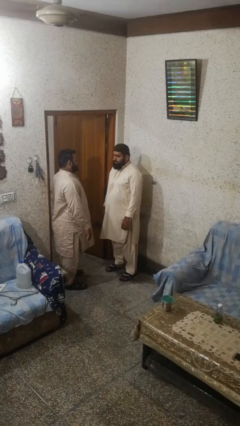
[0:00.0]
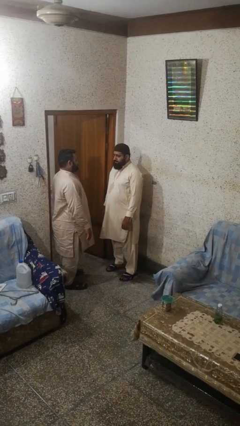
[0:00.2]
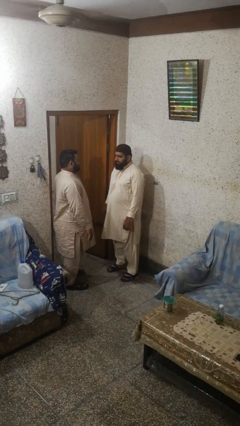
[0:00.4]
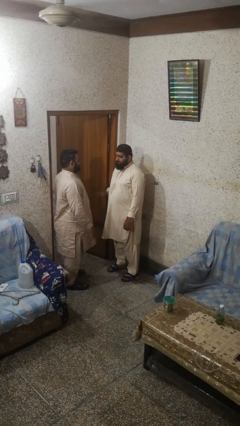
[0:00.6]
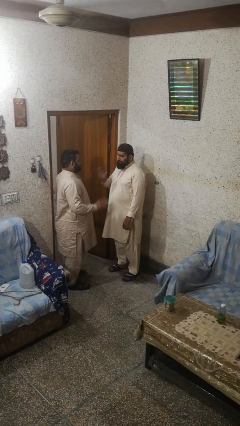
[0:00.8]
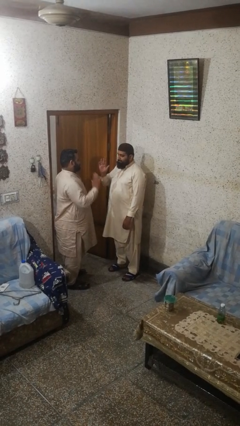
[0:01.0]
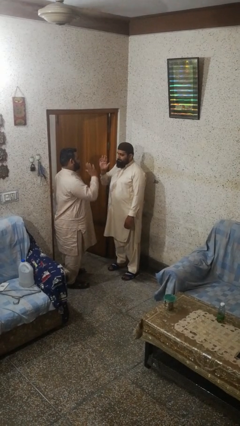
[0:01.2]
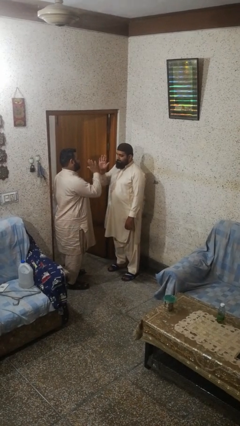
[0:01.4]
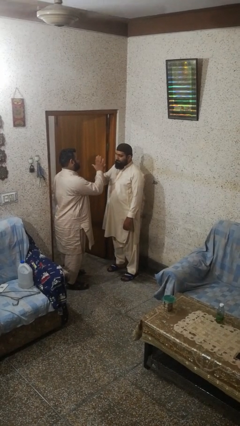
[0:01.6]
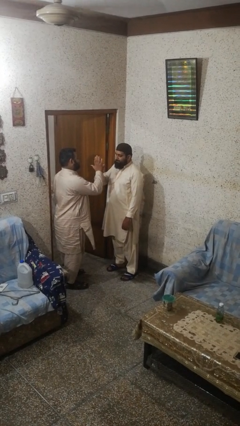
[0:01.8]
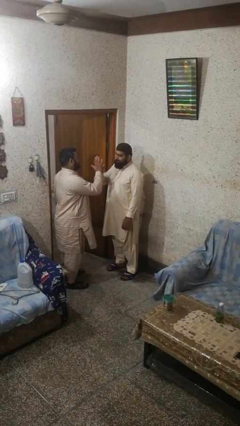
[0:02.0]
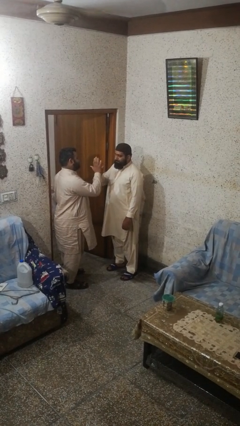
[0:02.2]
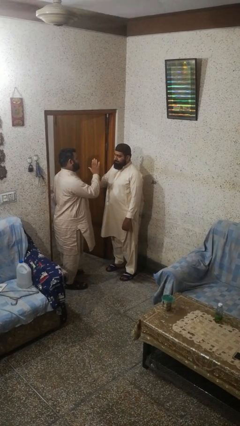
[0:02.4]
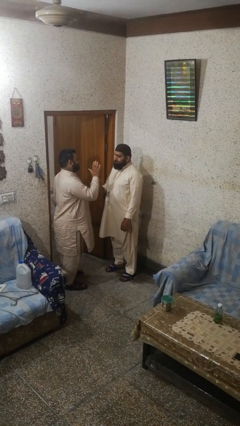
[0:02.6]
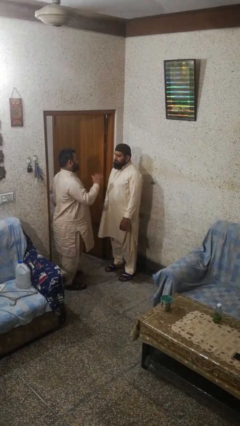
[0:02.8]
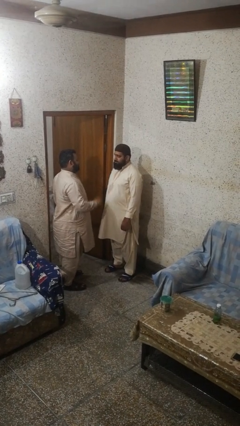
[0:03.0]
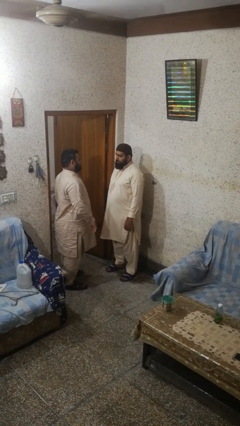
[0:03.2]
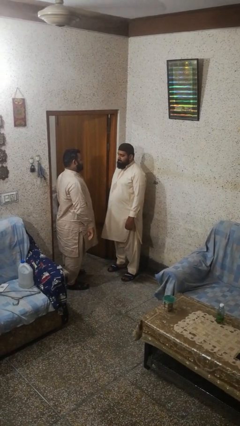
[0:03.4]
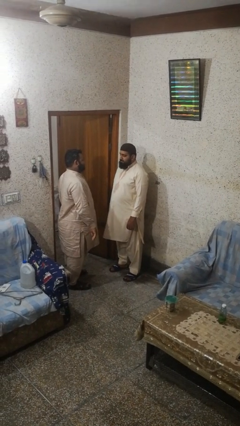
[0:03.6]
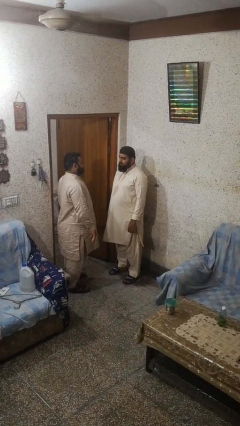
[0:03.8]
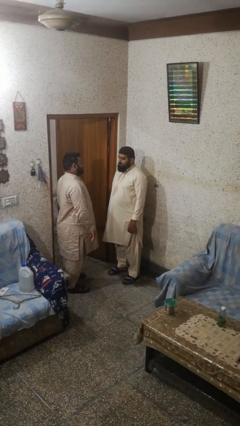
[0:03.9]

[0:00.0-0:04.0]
person highfives hand

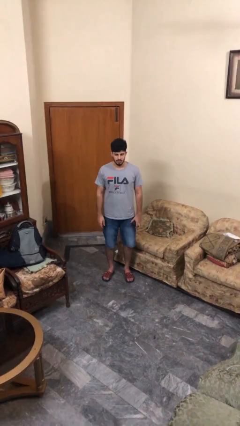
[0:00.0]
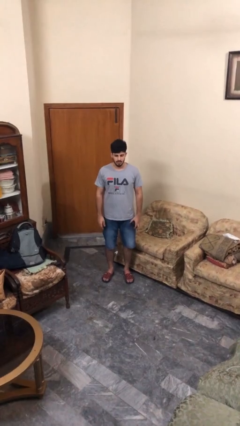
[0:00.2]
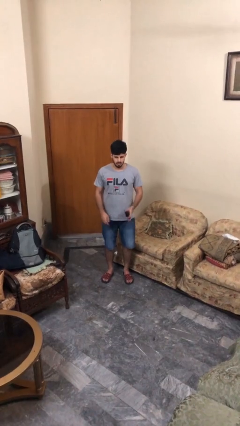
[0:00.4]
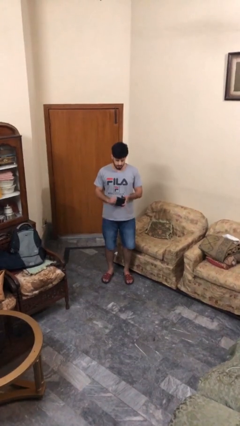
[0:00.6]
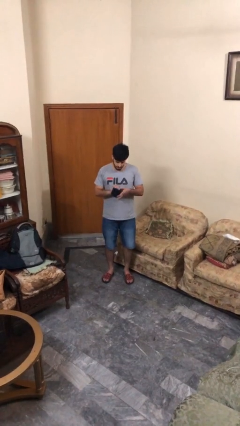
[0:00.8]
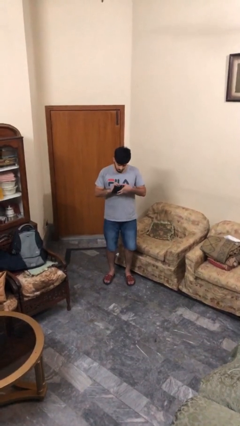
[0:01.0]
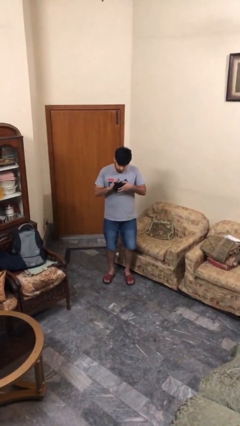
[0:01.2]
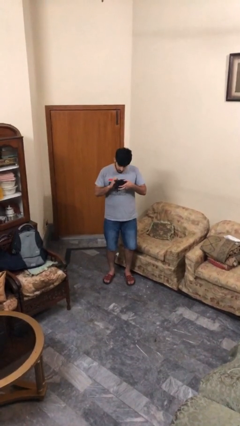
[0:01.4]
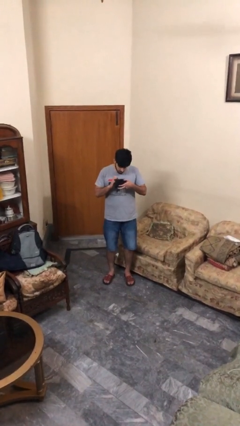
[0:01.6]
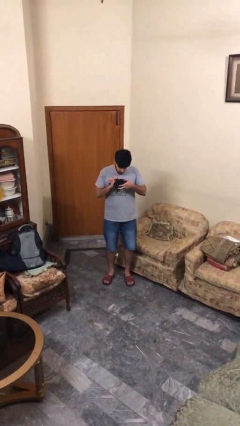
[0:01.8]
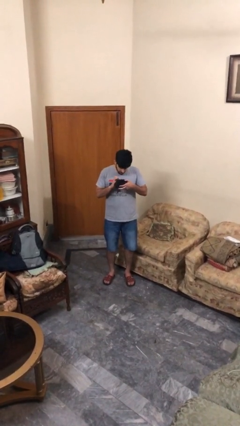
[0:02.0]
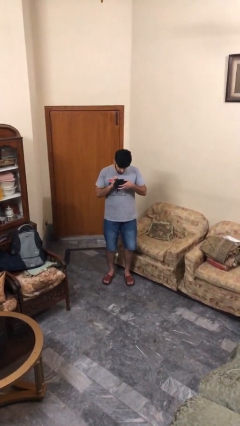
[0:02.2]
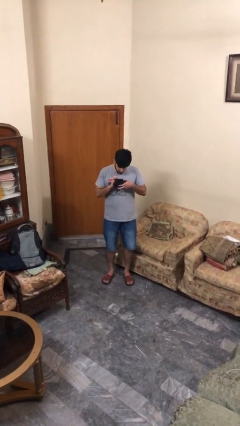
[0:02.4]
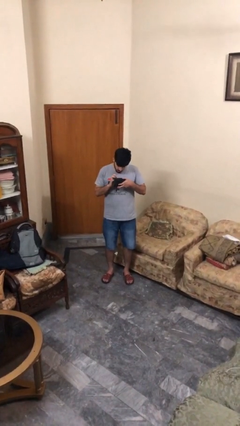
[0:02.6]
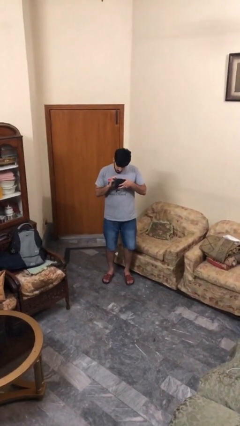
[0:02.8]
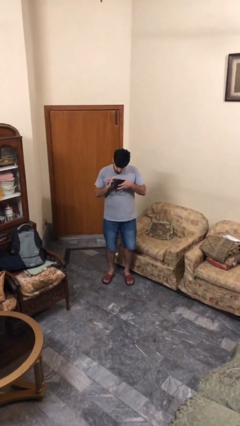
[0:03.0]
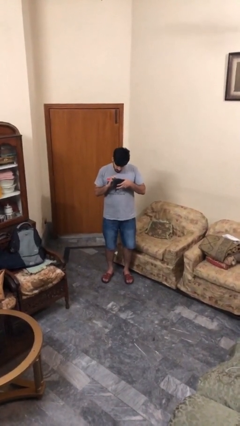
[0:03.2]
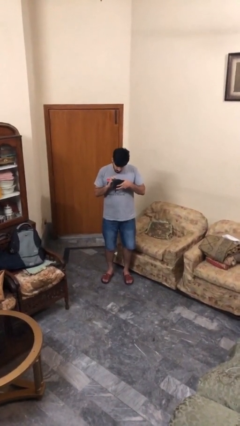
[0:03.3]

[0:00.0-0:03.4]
person searches in purse

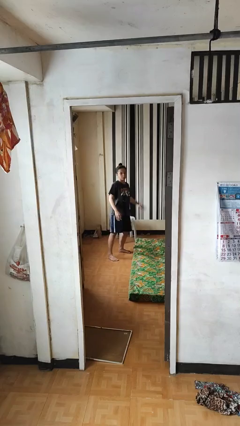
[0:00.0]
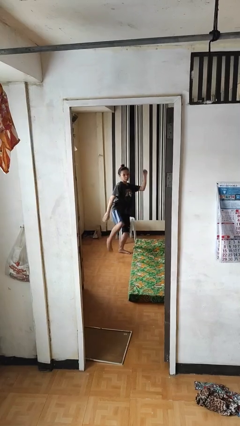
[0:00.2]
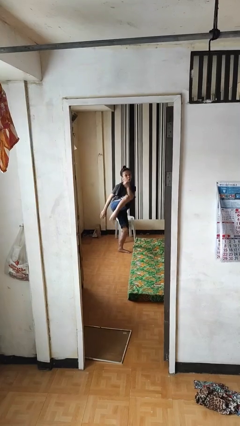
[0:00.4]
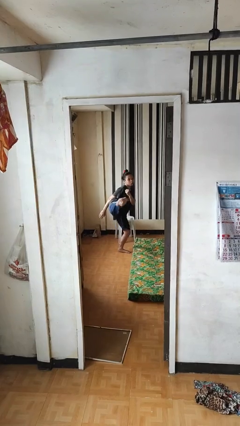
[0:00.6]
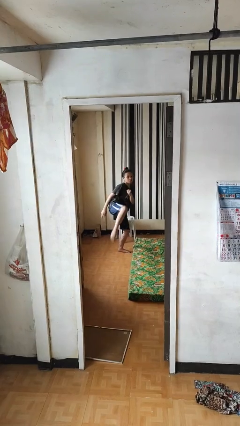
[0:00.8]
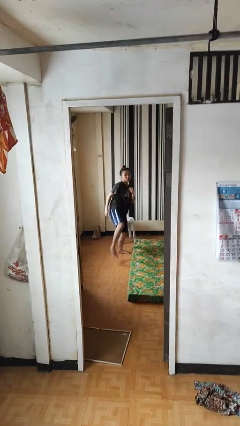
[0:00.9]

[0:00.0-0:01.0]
person karate kicks

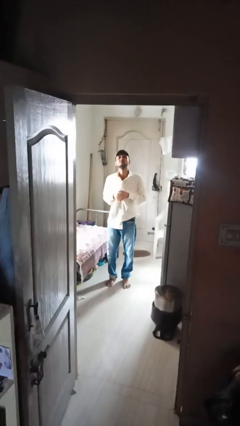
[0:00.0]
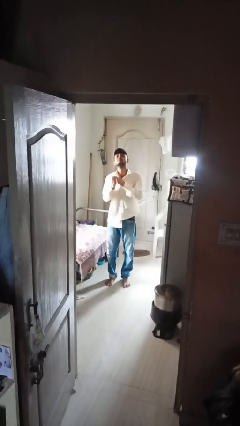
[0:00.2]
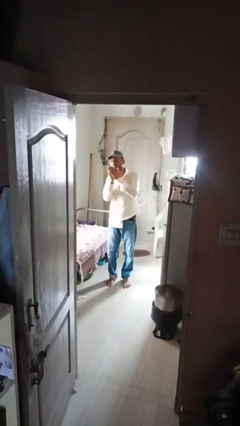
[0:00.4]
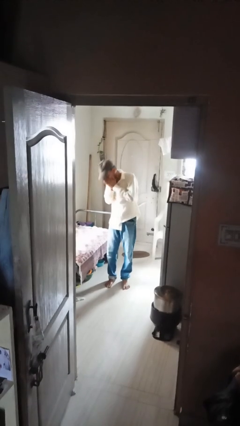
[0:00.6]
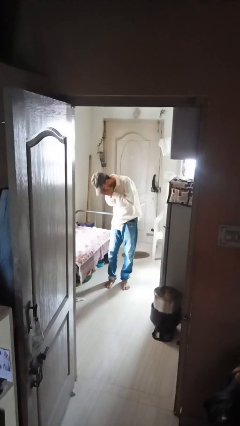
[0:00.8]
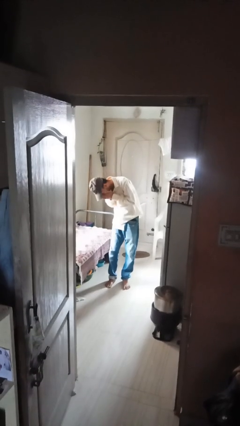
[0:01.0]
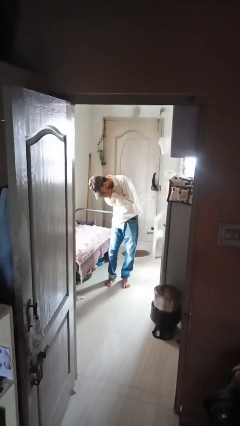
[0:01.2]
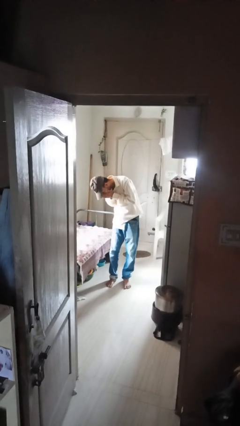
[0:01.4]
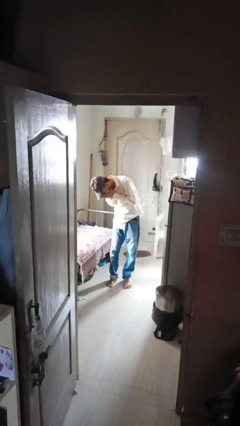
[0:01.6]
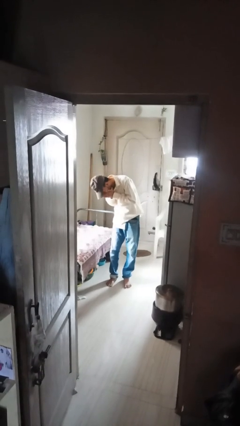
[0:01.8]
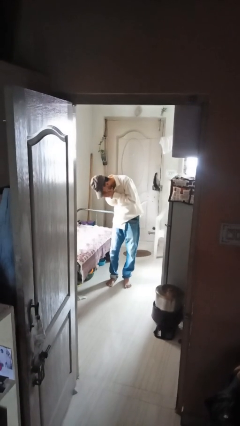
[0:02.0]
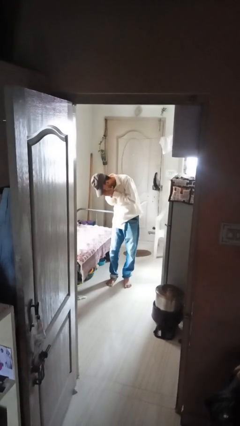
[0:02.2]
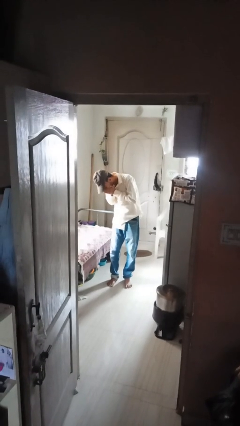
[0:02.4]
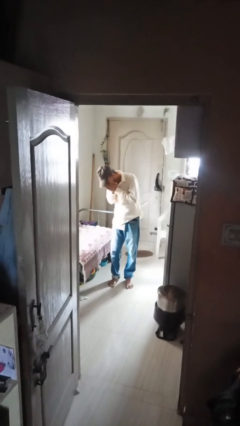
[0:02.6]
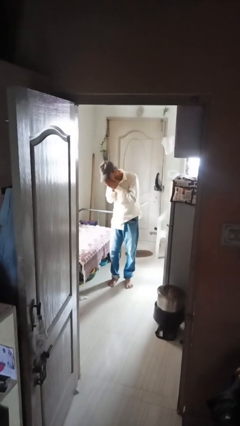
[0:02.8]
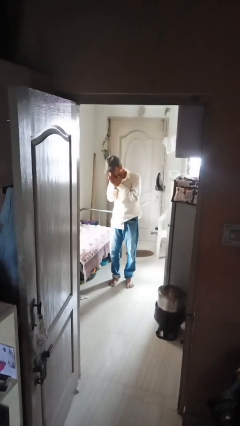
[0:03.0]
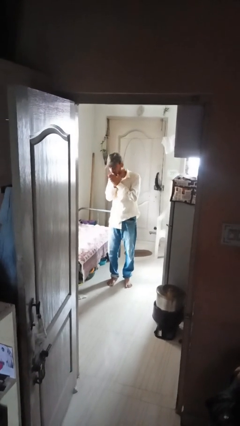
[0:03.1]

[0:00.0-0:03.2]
person sneezes into hand

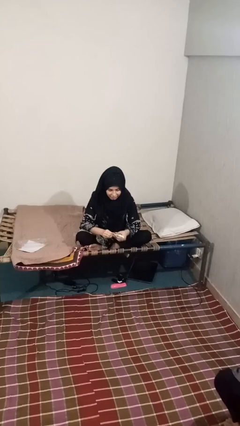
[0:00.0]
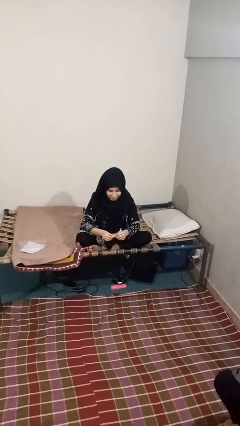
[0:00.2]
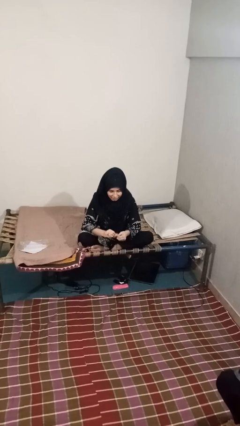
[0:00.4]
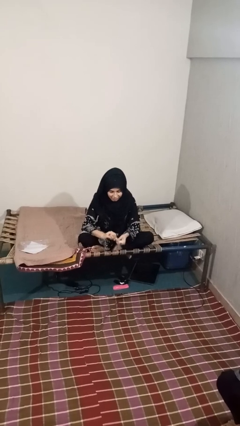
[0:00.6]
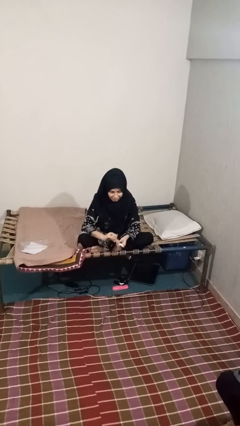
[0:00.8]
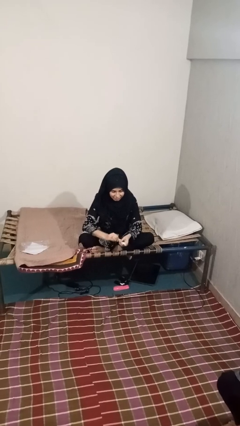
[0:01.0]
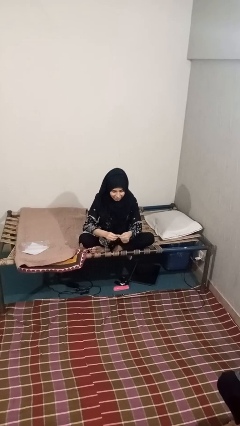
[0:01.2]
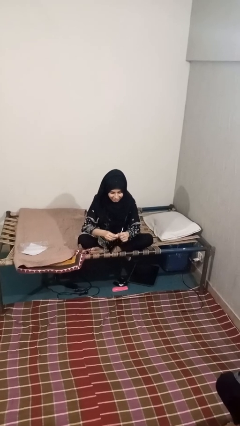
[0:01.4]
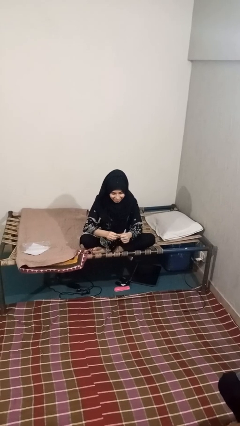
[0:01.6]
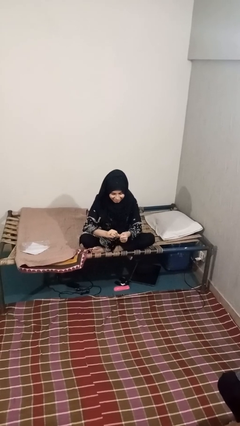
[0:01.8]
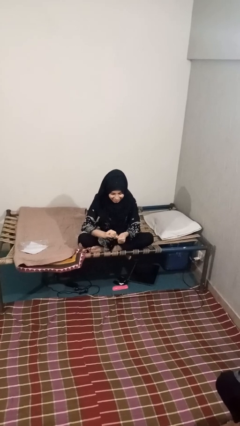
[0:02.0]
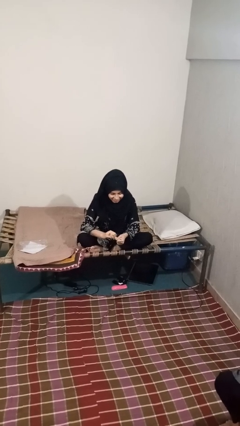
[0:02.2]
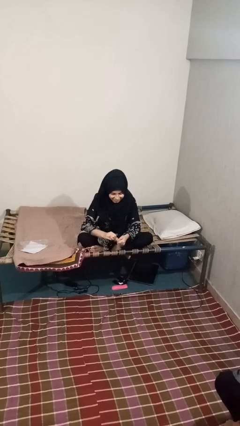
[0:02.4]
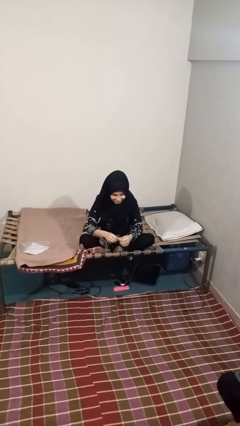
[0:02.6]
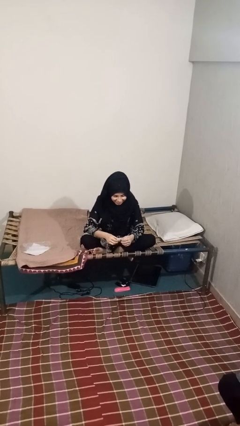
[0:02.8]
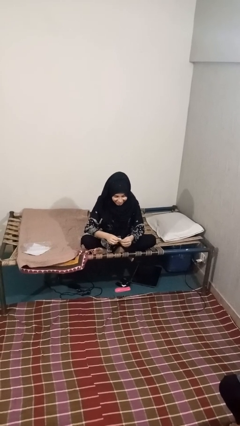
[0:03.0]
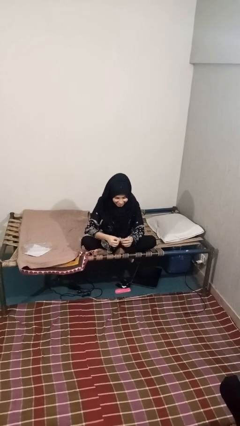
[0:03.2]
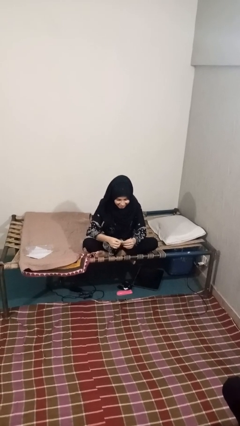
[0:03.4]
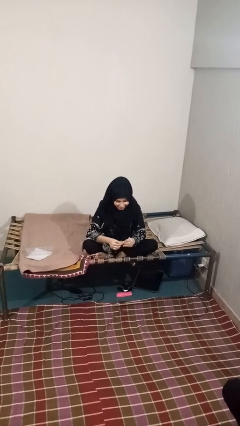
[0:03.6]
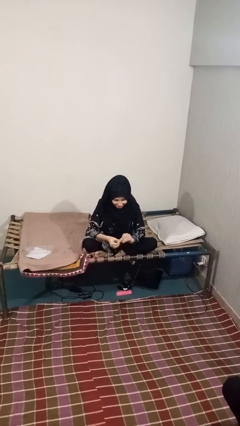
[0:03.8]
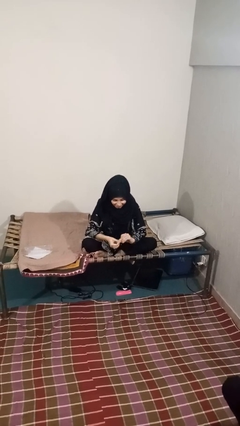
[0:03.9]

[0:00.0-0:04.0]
person tears paper

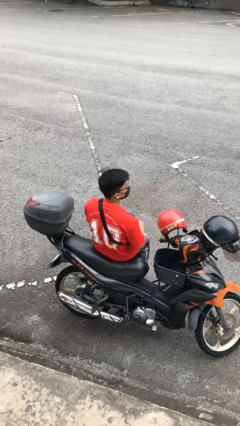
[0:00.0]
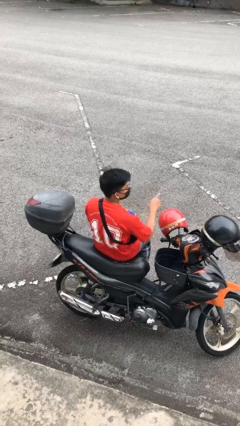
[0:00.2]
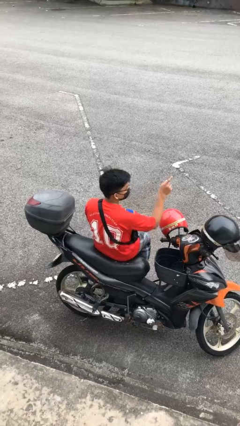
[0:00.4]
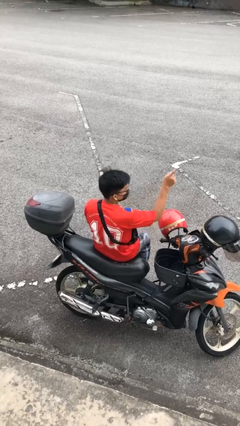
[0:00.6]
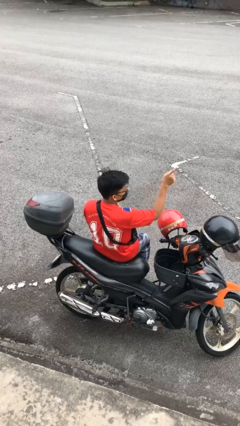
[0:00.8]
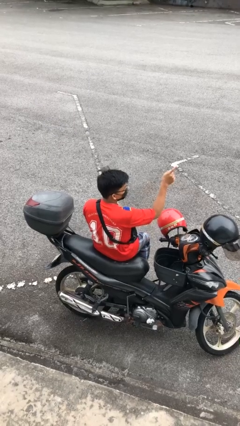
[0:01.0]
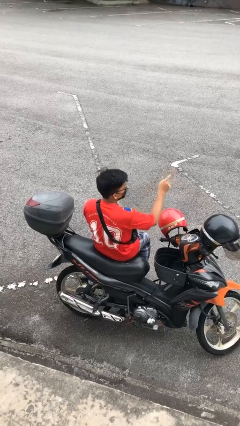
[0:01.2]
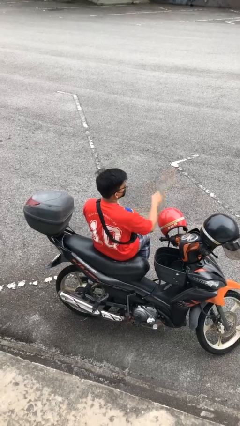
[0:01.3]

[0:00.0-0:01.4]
person points at person

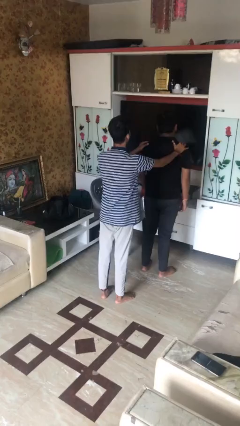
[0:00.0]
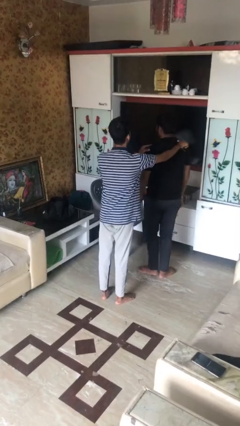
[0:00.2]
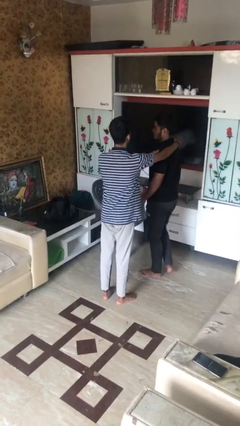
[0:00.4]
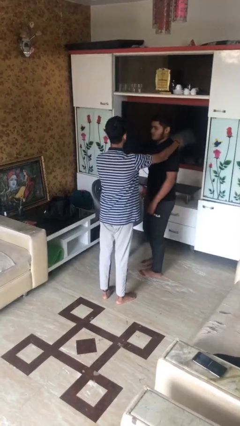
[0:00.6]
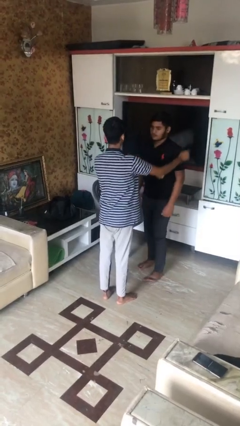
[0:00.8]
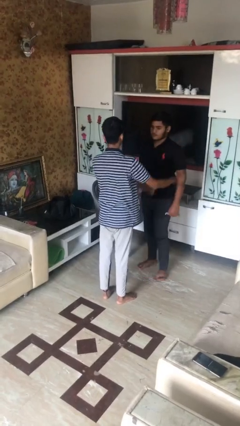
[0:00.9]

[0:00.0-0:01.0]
person spins person around
